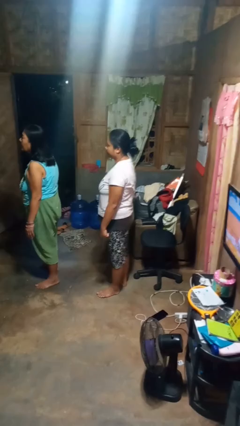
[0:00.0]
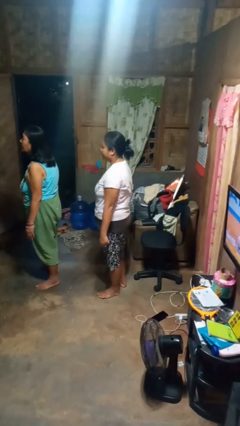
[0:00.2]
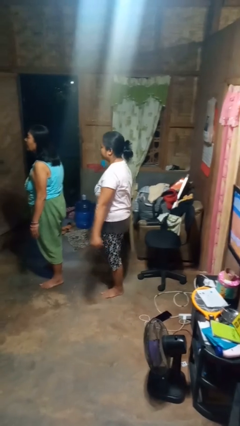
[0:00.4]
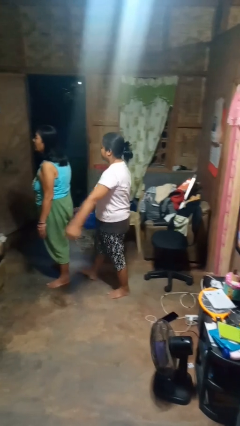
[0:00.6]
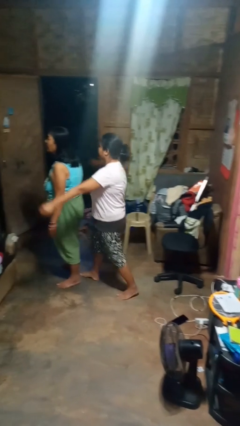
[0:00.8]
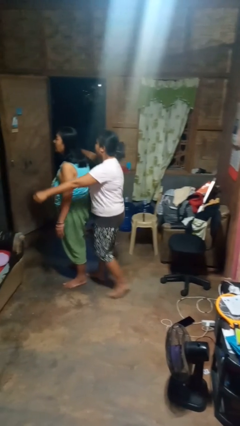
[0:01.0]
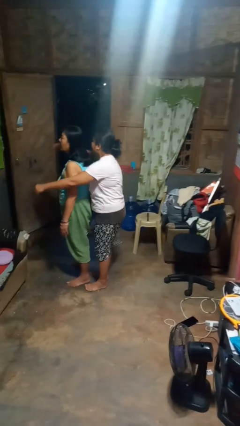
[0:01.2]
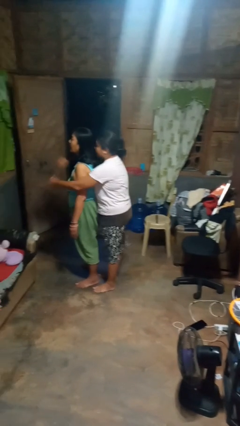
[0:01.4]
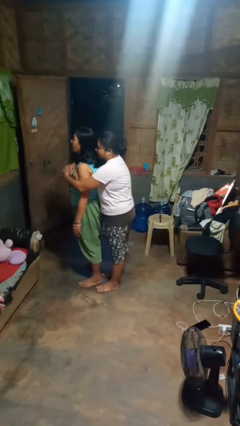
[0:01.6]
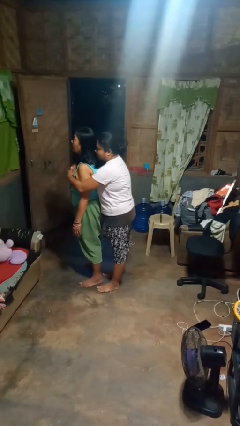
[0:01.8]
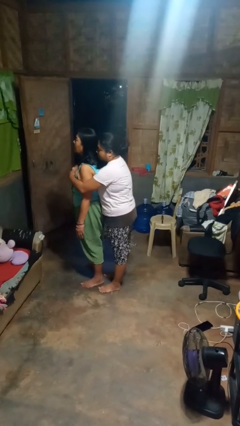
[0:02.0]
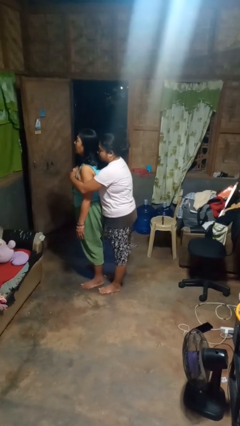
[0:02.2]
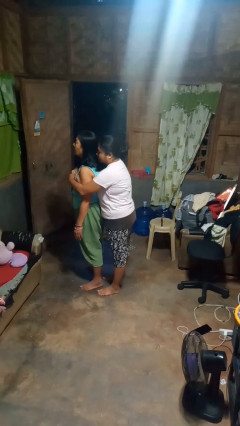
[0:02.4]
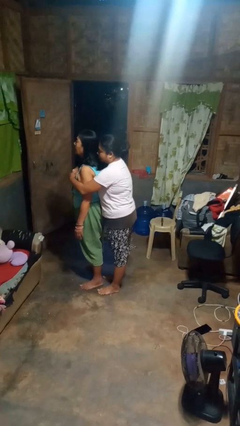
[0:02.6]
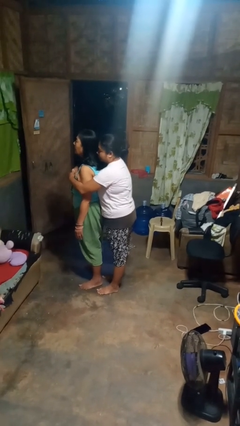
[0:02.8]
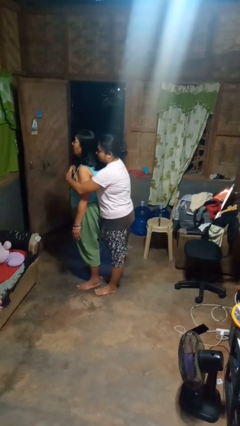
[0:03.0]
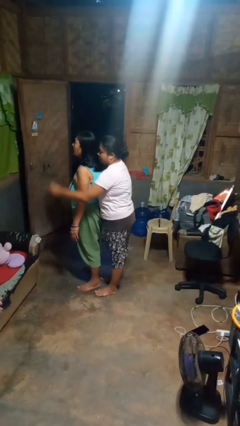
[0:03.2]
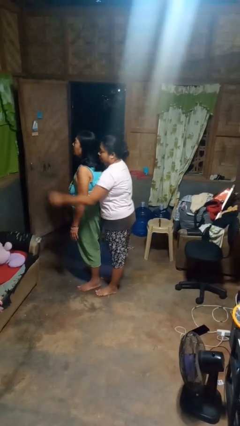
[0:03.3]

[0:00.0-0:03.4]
person hugs person from behind

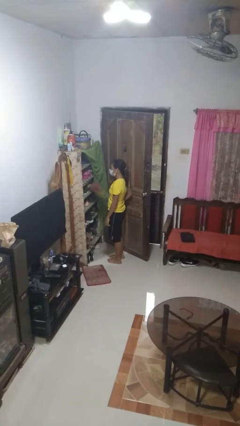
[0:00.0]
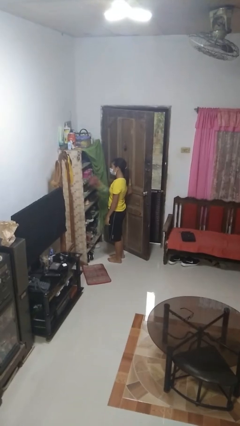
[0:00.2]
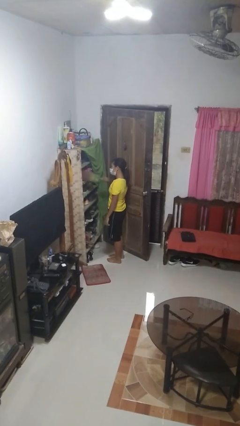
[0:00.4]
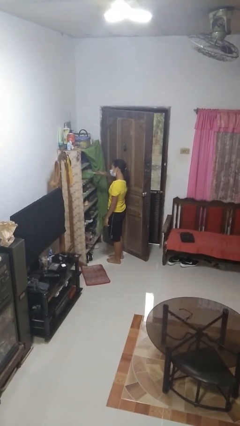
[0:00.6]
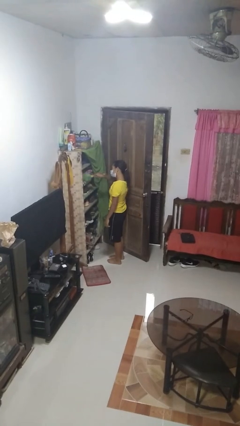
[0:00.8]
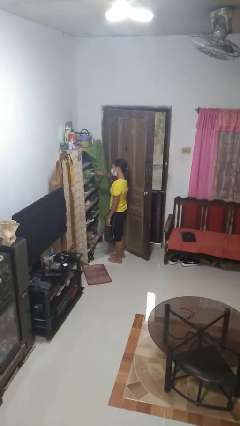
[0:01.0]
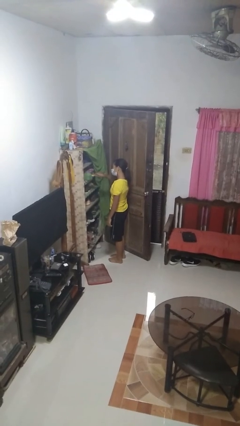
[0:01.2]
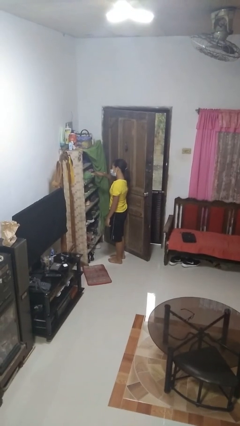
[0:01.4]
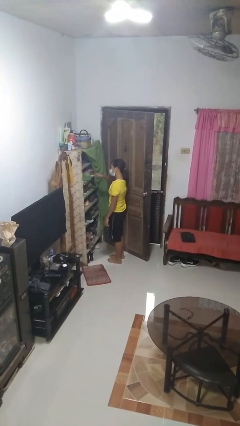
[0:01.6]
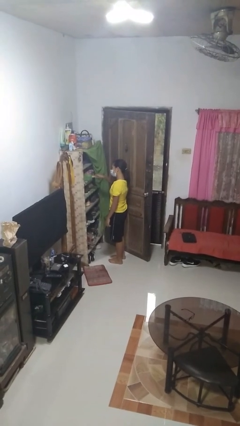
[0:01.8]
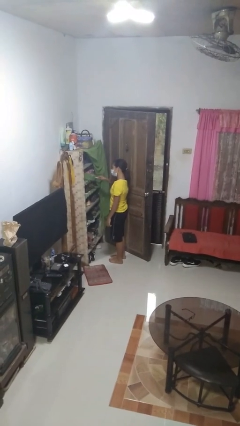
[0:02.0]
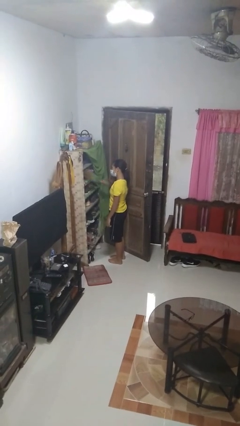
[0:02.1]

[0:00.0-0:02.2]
person dusts furniture

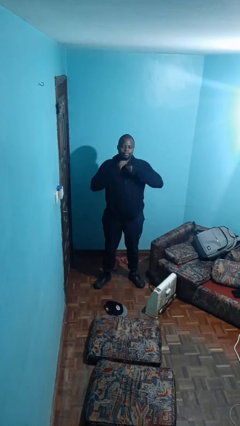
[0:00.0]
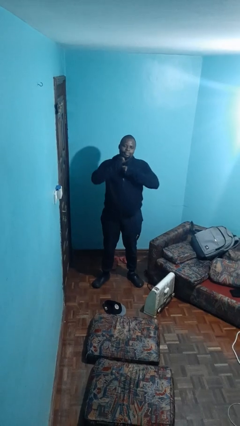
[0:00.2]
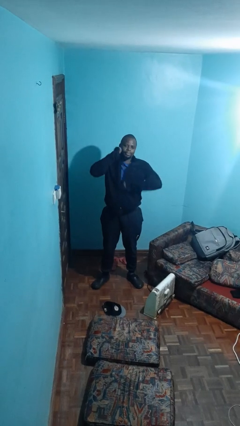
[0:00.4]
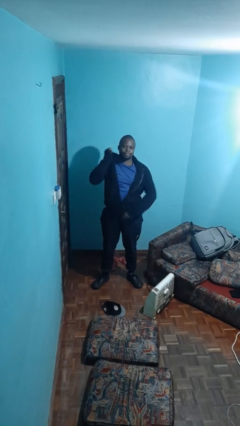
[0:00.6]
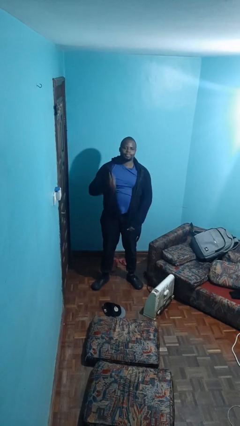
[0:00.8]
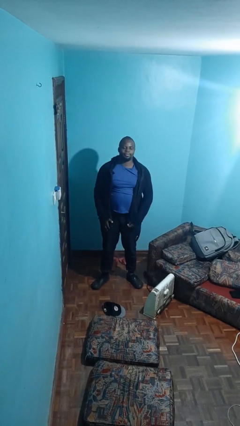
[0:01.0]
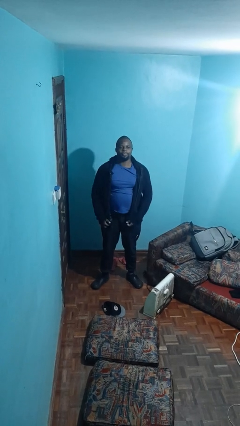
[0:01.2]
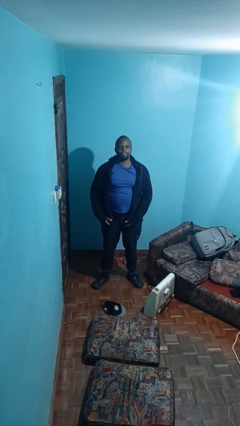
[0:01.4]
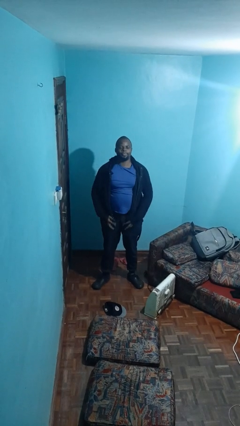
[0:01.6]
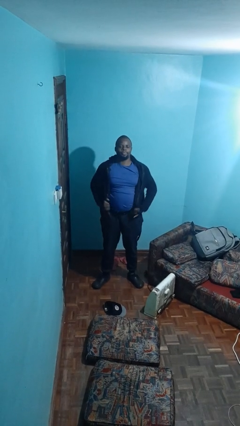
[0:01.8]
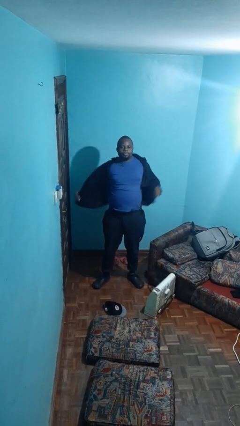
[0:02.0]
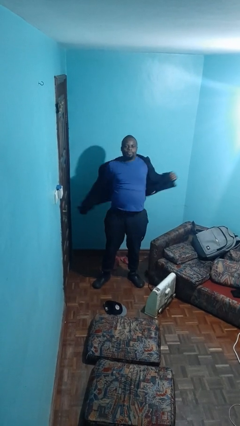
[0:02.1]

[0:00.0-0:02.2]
person unzips jacket

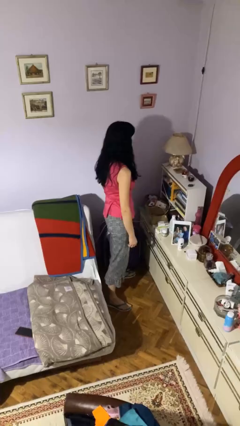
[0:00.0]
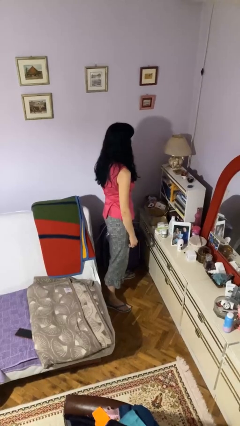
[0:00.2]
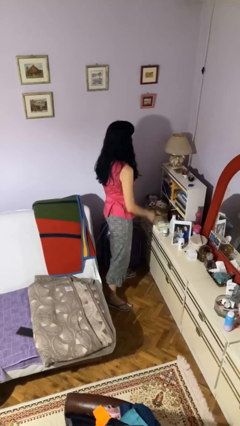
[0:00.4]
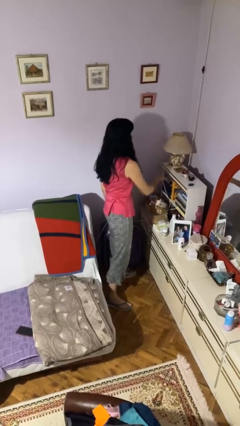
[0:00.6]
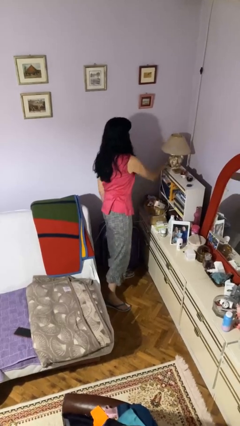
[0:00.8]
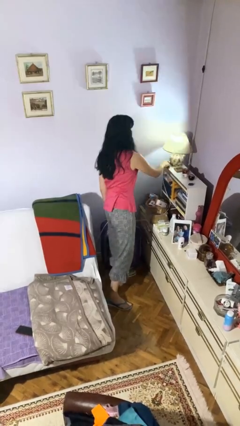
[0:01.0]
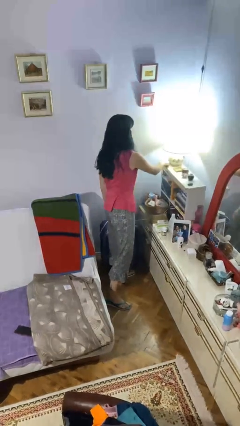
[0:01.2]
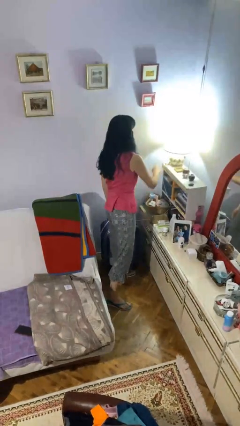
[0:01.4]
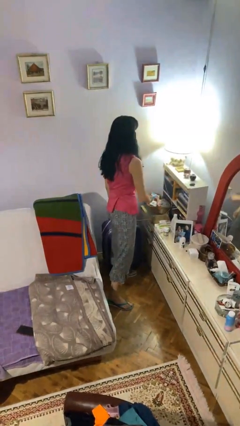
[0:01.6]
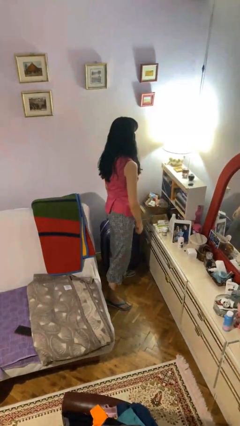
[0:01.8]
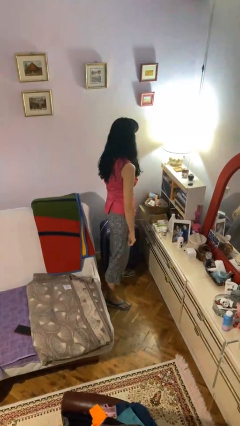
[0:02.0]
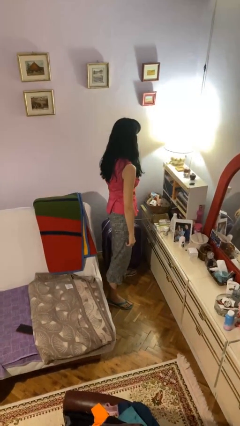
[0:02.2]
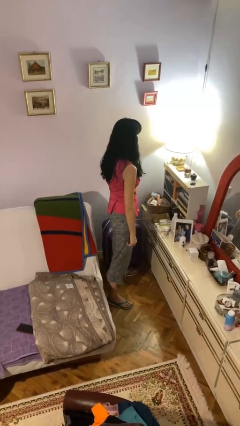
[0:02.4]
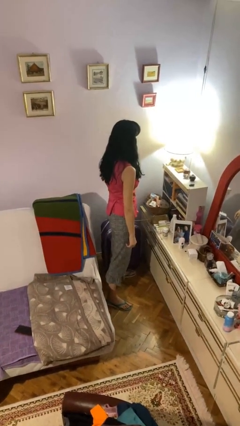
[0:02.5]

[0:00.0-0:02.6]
person turns on lamp

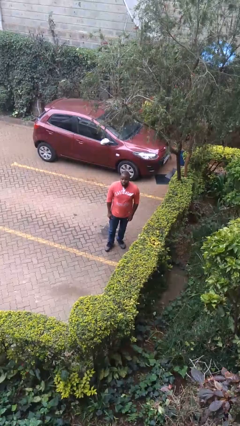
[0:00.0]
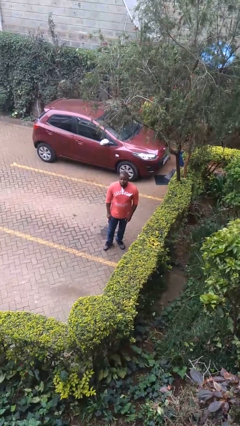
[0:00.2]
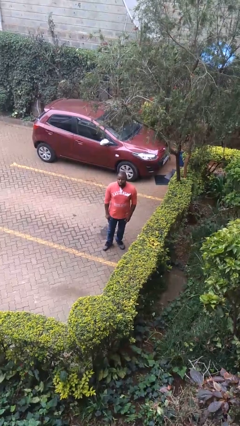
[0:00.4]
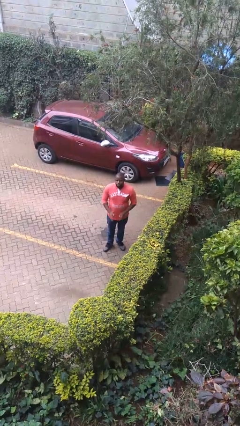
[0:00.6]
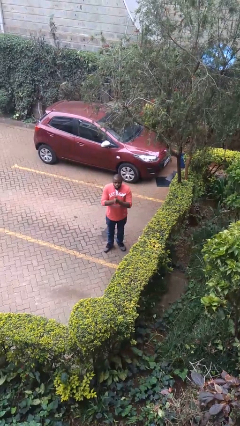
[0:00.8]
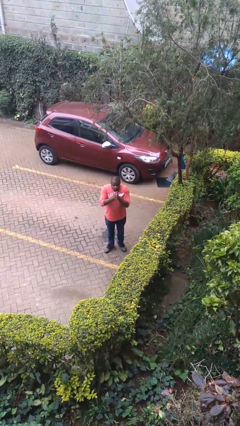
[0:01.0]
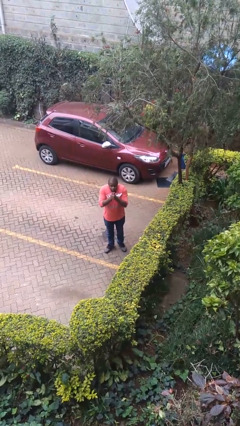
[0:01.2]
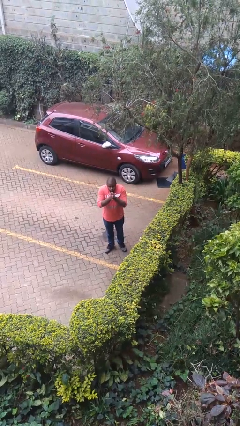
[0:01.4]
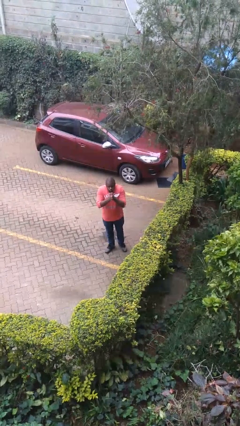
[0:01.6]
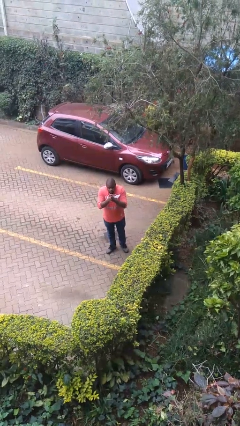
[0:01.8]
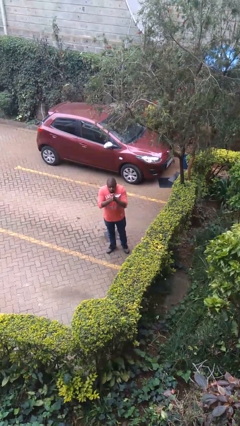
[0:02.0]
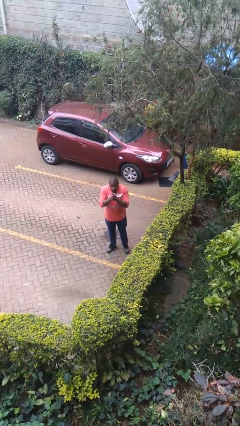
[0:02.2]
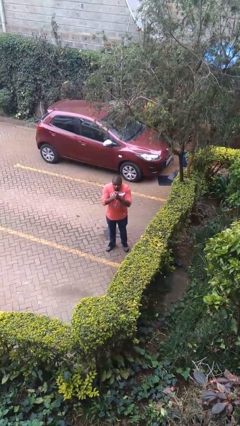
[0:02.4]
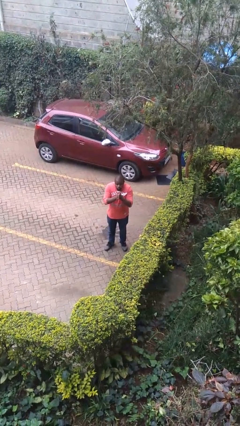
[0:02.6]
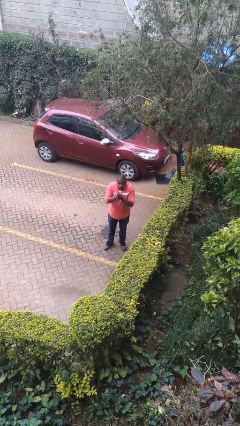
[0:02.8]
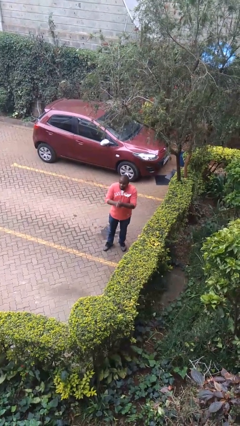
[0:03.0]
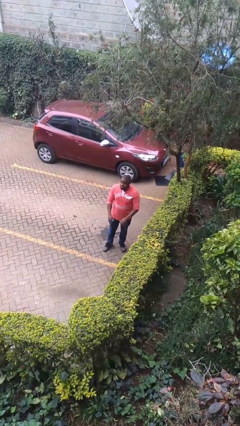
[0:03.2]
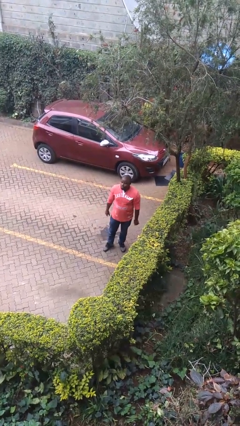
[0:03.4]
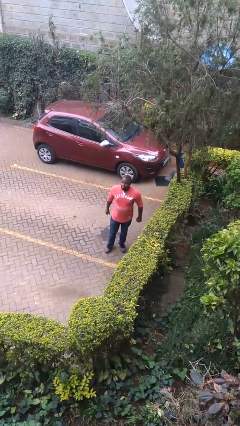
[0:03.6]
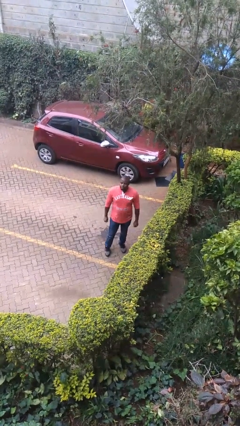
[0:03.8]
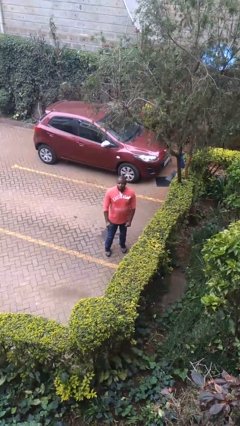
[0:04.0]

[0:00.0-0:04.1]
person blows into hands

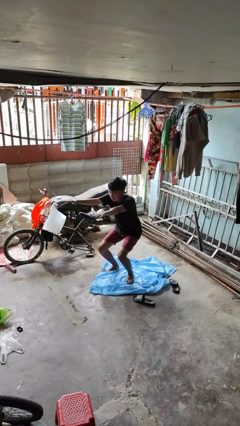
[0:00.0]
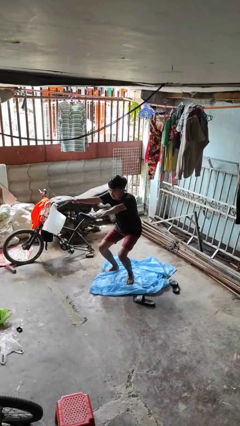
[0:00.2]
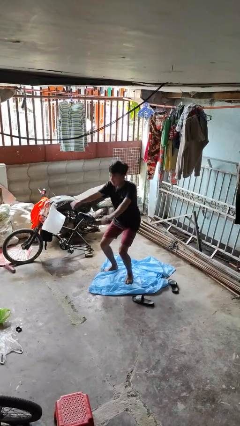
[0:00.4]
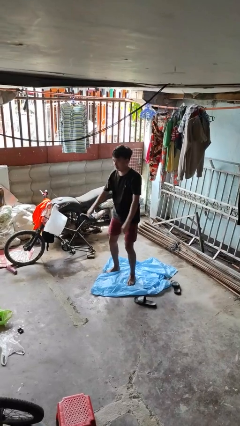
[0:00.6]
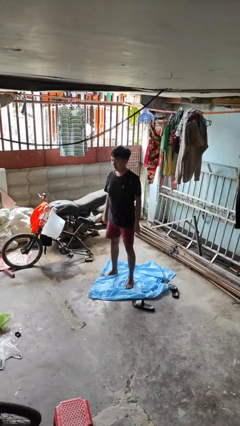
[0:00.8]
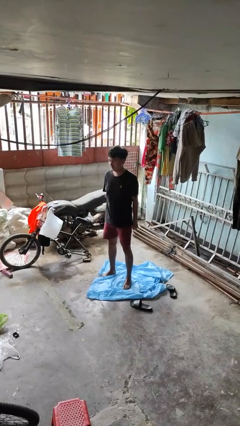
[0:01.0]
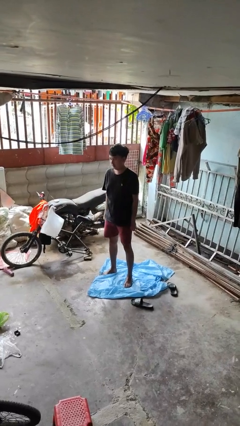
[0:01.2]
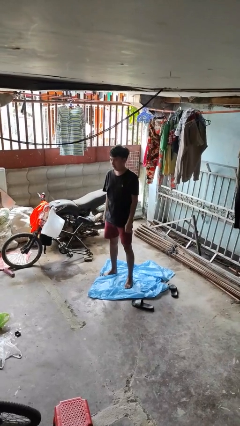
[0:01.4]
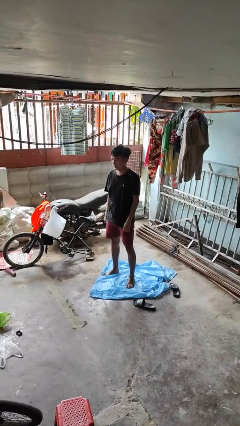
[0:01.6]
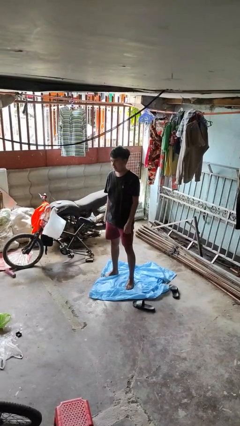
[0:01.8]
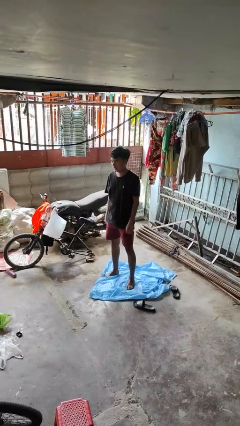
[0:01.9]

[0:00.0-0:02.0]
person stands up

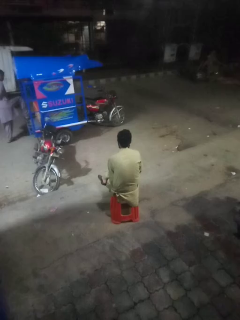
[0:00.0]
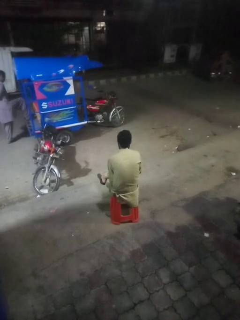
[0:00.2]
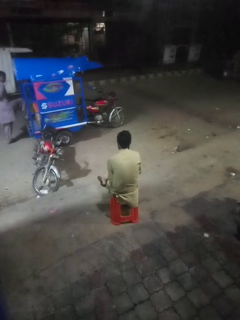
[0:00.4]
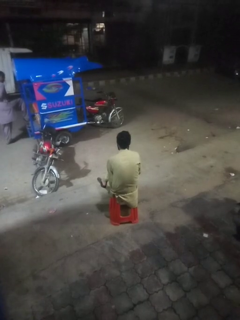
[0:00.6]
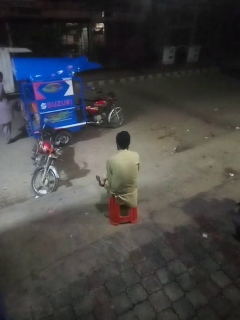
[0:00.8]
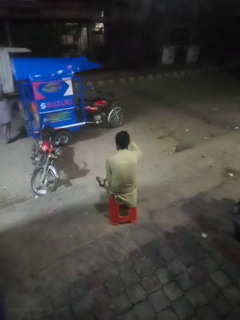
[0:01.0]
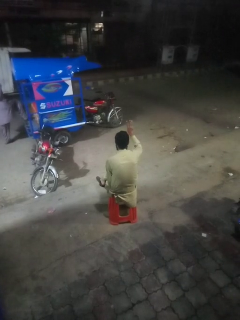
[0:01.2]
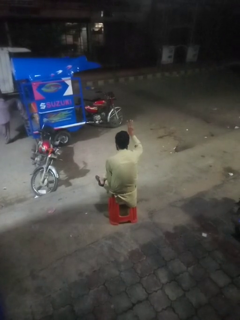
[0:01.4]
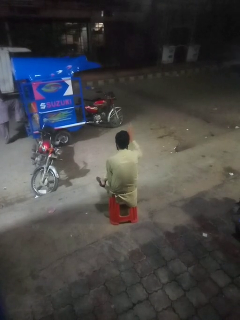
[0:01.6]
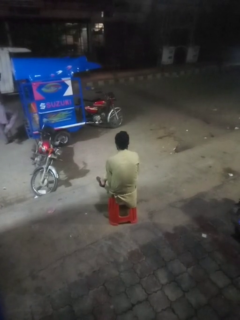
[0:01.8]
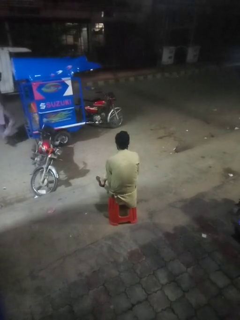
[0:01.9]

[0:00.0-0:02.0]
person gestures number three
